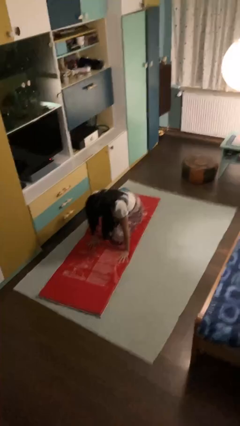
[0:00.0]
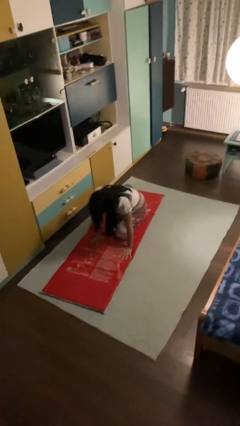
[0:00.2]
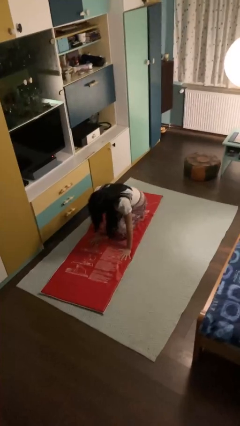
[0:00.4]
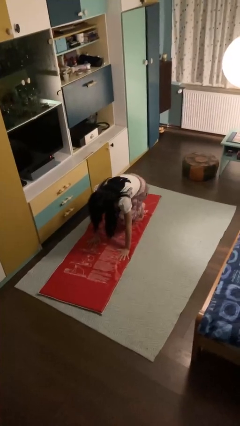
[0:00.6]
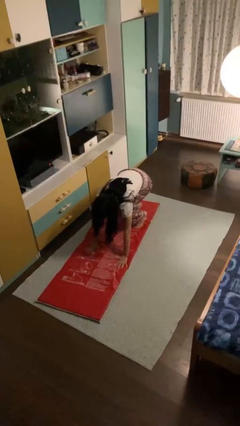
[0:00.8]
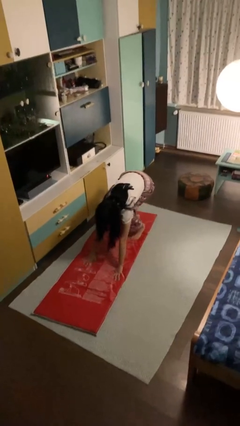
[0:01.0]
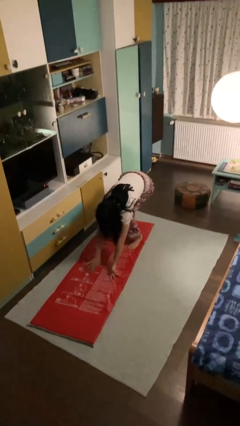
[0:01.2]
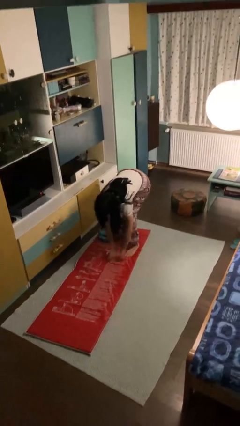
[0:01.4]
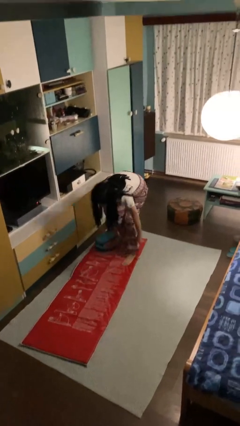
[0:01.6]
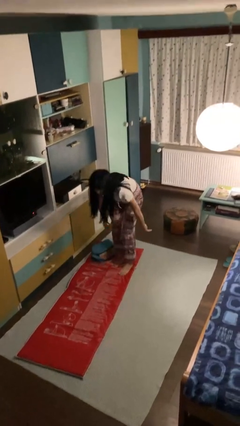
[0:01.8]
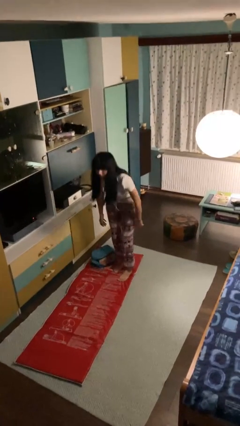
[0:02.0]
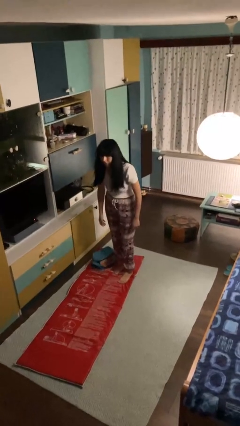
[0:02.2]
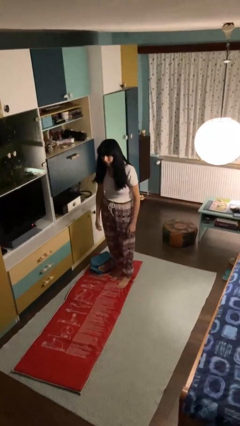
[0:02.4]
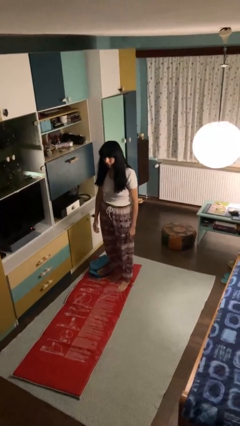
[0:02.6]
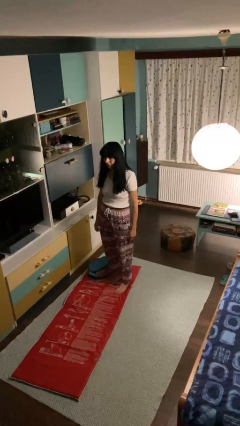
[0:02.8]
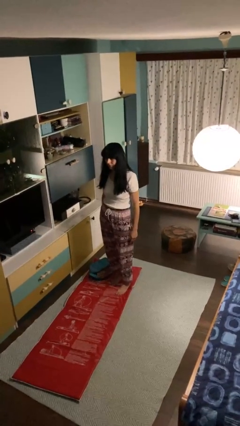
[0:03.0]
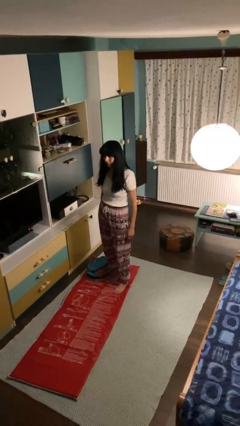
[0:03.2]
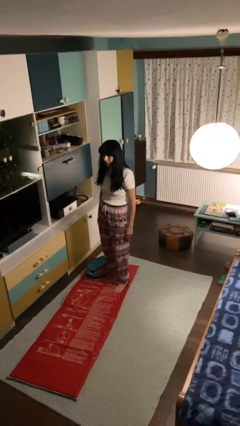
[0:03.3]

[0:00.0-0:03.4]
person stands up from floor

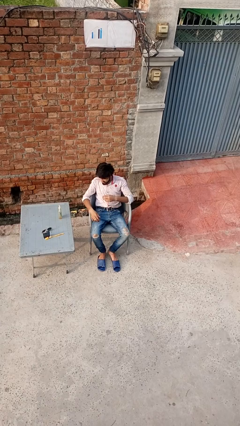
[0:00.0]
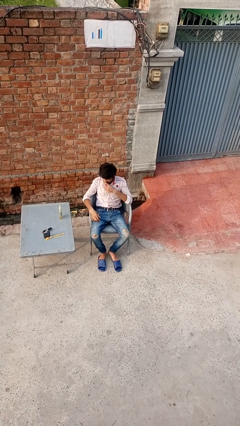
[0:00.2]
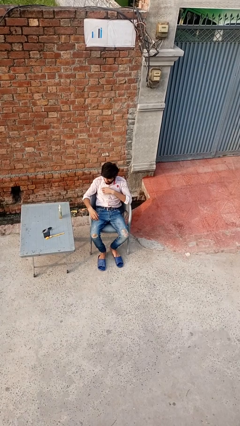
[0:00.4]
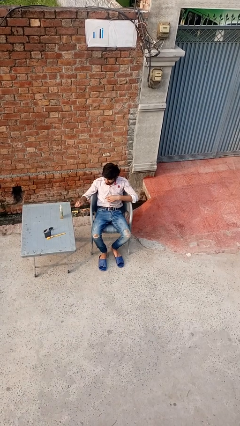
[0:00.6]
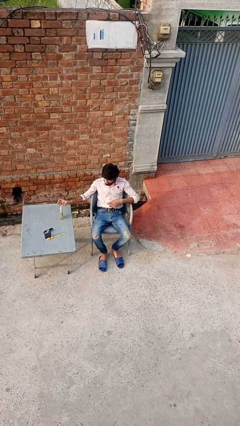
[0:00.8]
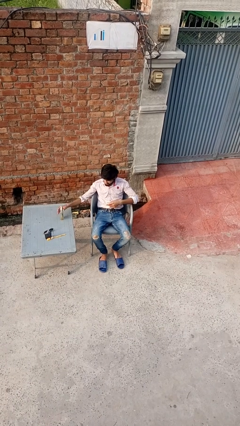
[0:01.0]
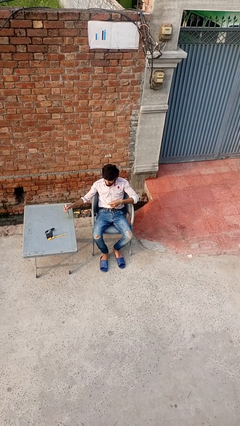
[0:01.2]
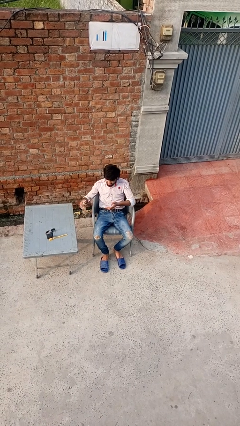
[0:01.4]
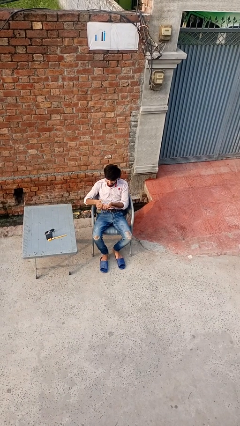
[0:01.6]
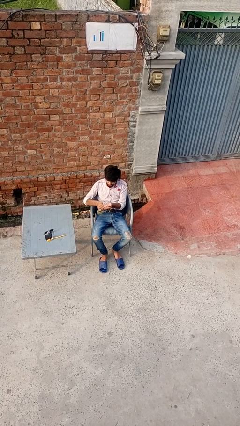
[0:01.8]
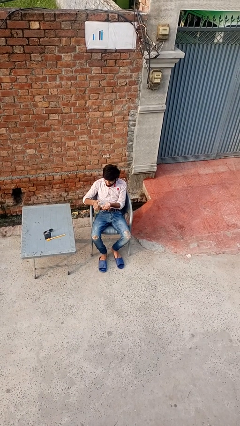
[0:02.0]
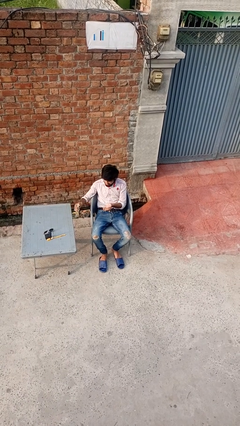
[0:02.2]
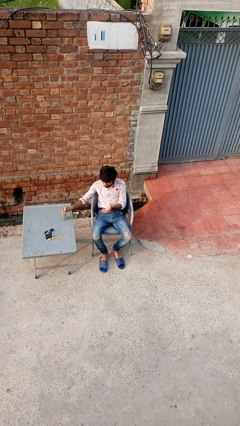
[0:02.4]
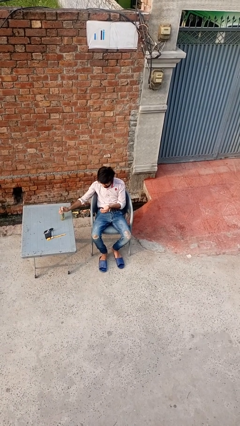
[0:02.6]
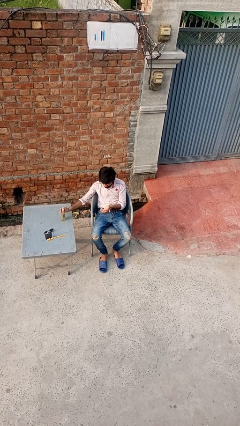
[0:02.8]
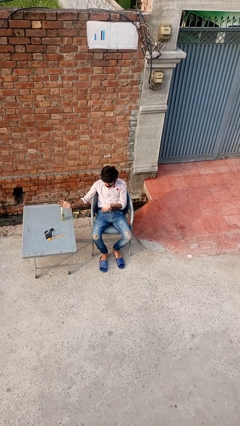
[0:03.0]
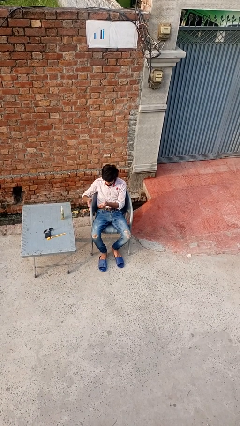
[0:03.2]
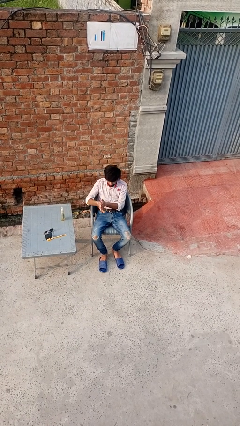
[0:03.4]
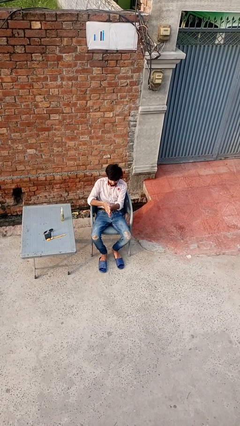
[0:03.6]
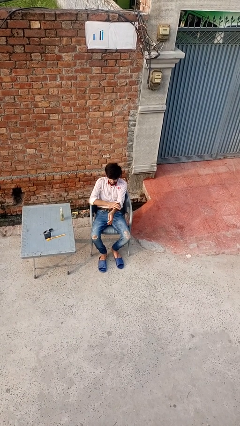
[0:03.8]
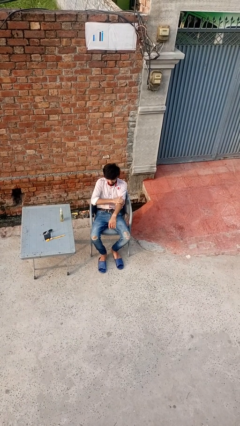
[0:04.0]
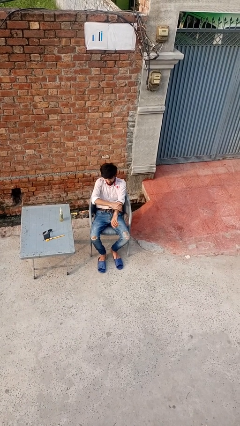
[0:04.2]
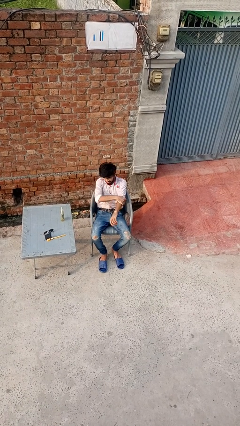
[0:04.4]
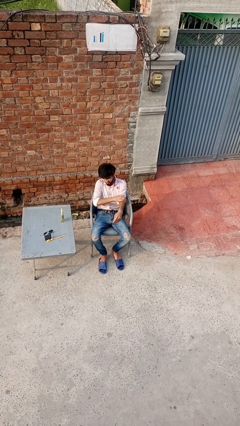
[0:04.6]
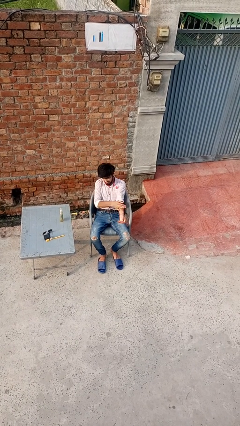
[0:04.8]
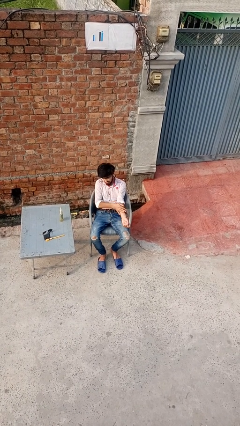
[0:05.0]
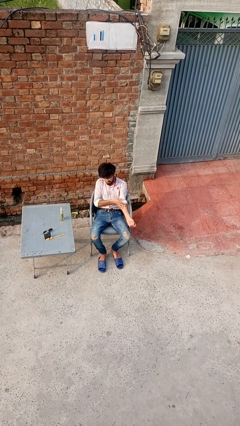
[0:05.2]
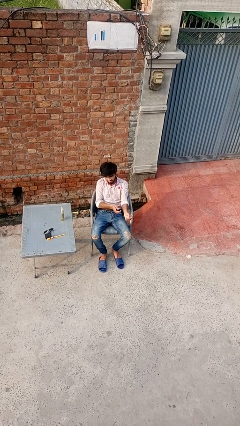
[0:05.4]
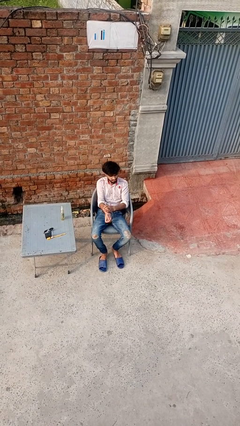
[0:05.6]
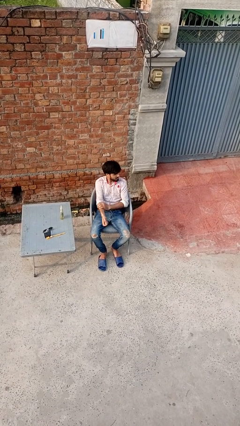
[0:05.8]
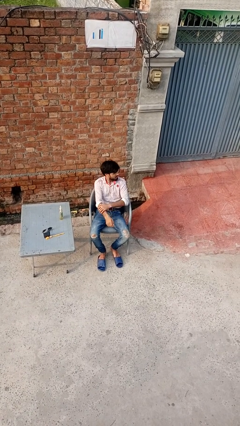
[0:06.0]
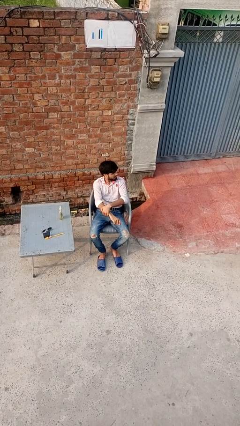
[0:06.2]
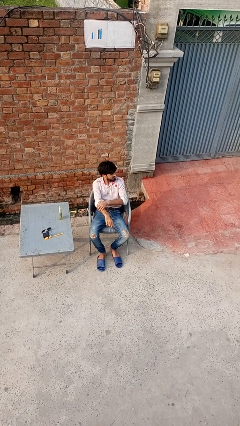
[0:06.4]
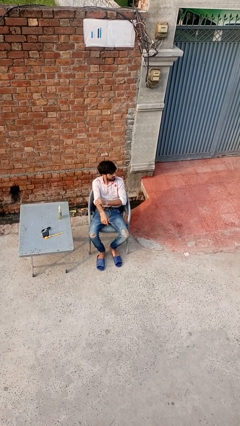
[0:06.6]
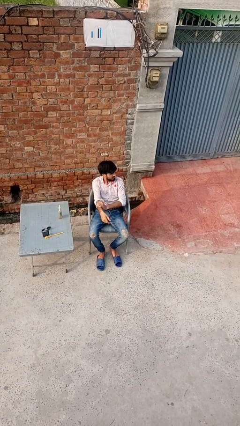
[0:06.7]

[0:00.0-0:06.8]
person applies sunscreen

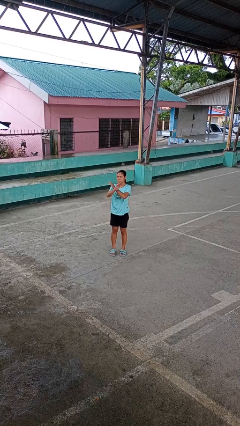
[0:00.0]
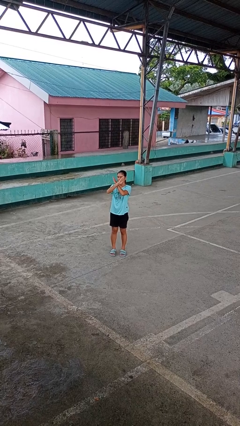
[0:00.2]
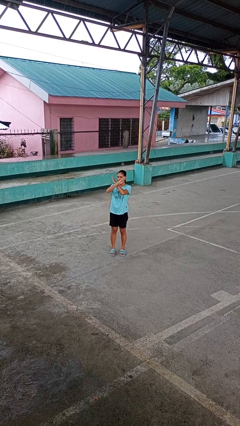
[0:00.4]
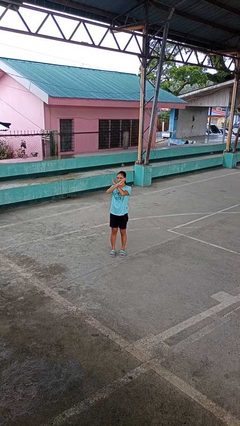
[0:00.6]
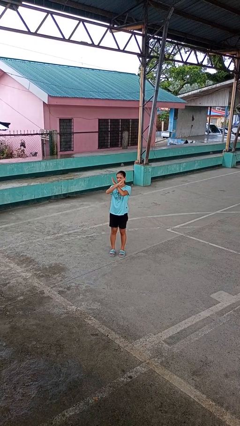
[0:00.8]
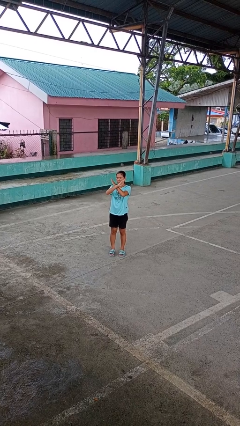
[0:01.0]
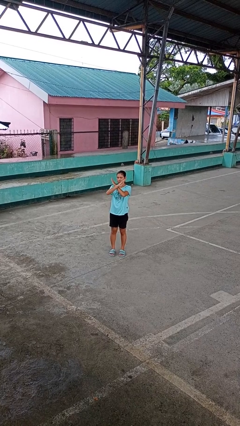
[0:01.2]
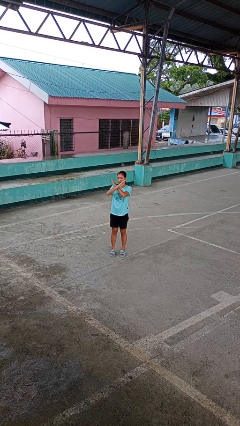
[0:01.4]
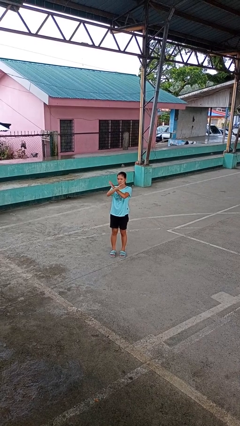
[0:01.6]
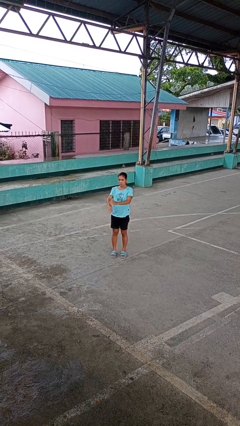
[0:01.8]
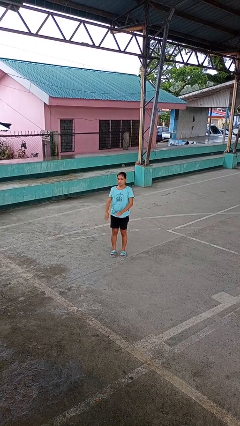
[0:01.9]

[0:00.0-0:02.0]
person gestures arms x

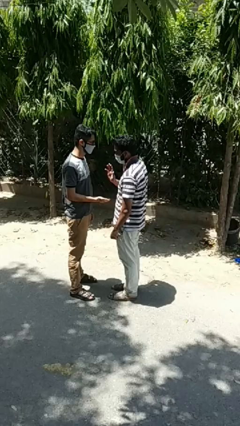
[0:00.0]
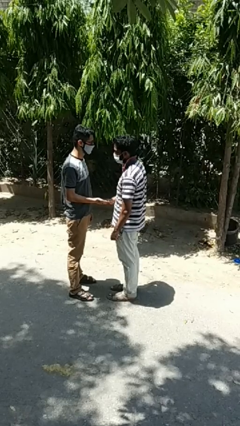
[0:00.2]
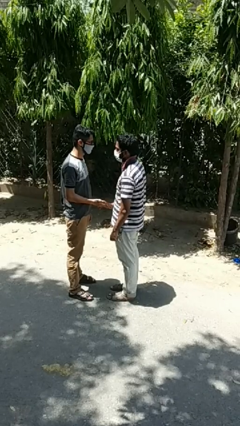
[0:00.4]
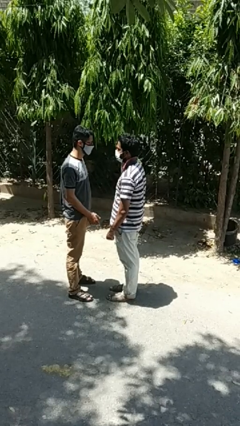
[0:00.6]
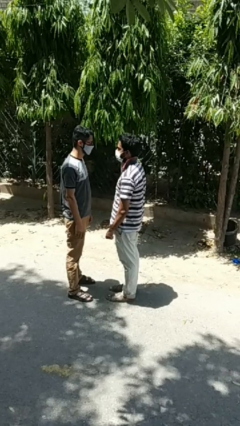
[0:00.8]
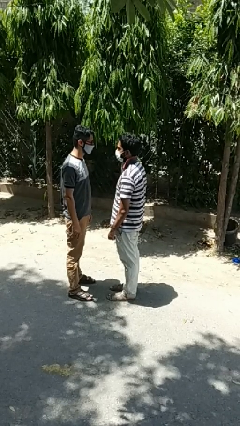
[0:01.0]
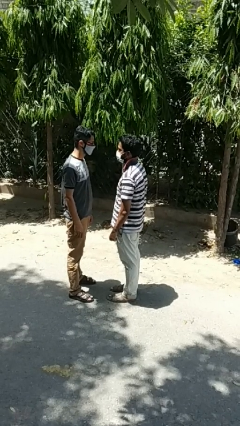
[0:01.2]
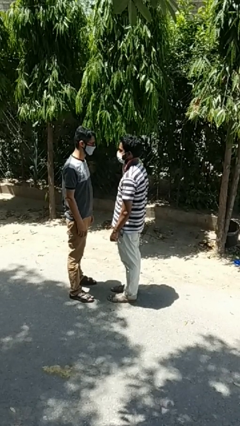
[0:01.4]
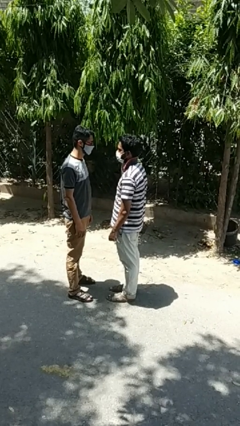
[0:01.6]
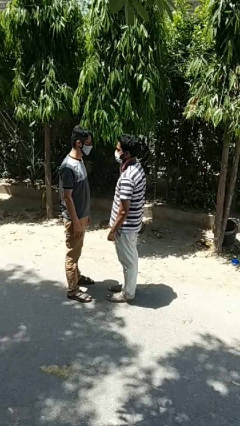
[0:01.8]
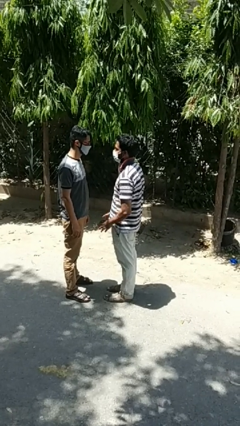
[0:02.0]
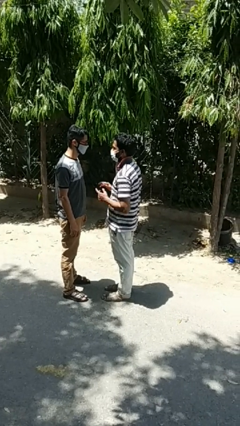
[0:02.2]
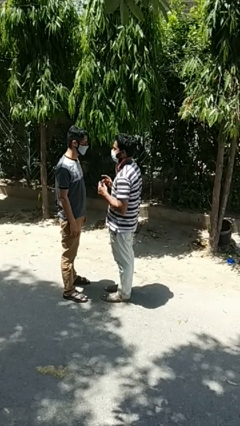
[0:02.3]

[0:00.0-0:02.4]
person highfives hand

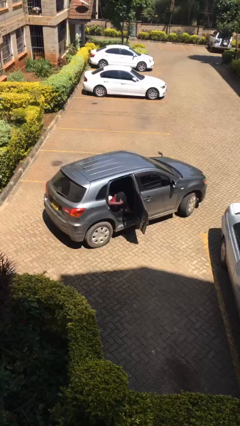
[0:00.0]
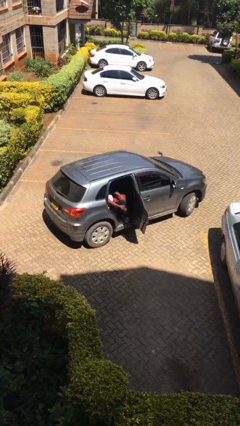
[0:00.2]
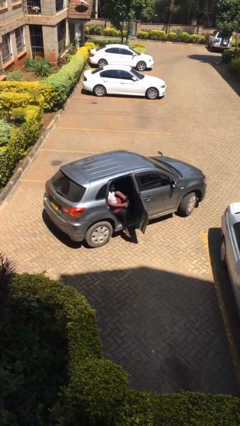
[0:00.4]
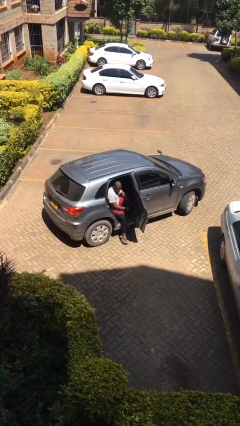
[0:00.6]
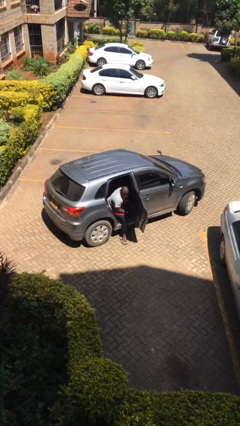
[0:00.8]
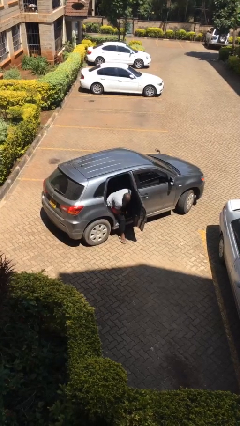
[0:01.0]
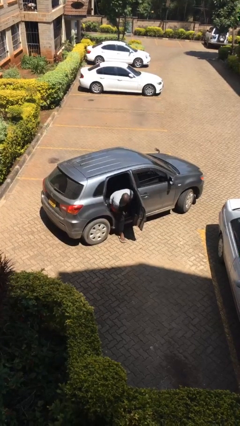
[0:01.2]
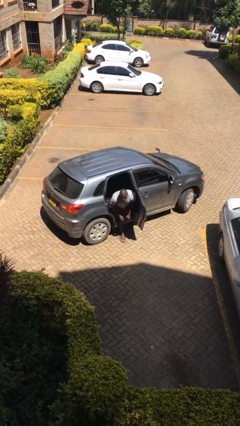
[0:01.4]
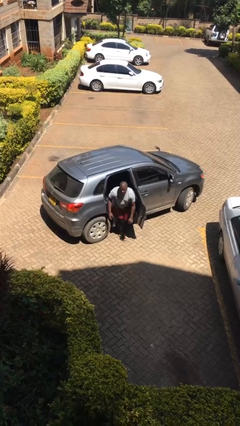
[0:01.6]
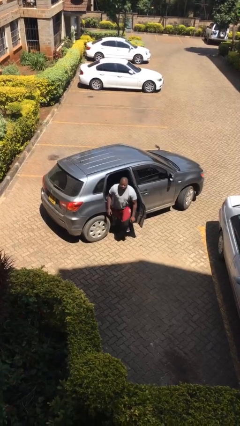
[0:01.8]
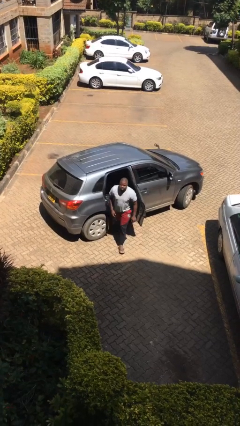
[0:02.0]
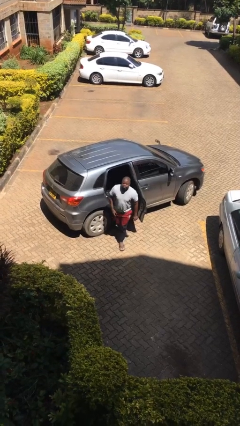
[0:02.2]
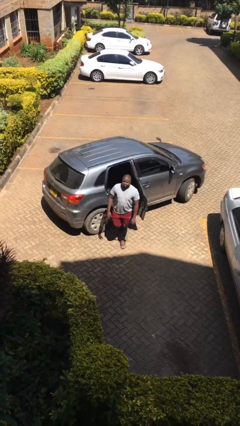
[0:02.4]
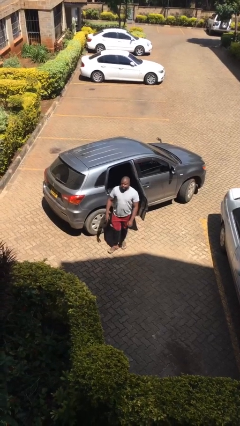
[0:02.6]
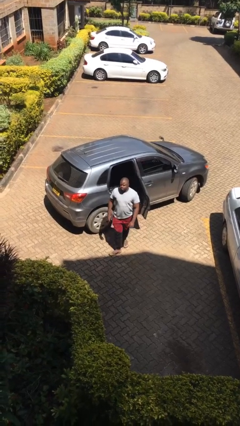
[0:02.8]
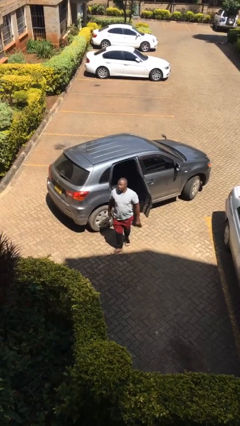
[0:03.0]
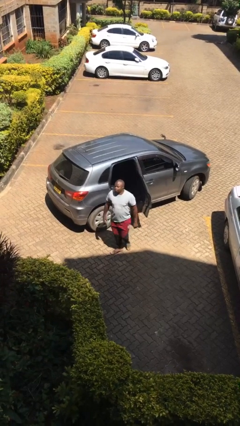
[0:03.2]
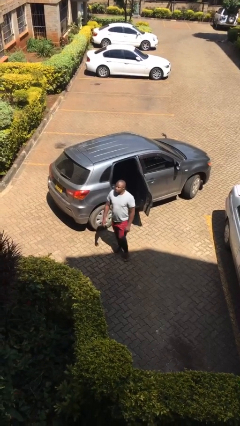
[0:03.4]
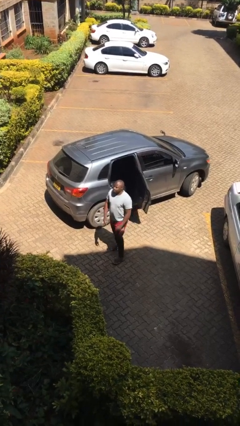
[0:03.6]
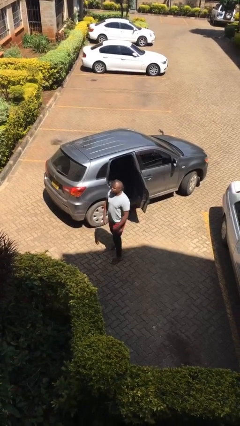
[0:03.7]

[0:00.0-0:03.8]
person exits car
